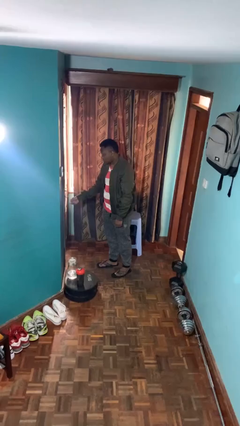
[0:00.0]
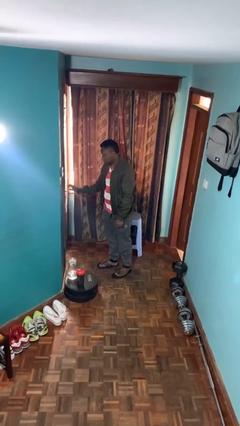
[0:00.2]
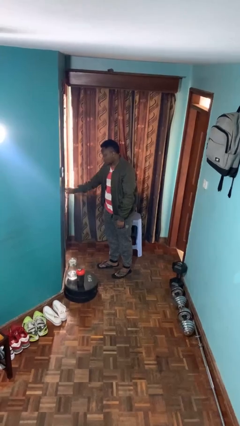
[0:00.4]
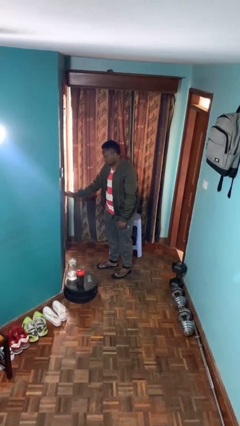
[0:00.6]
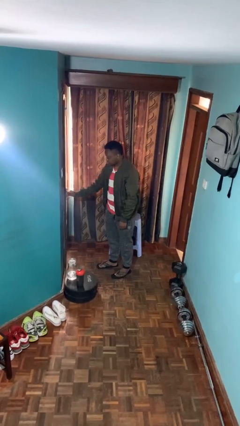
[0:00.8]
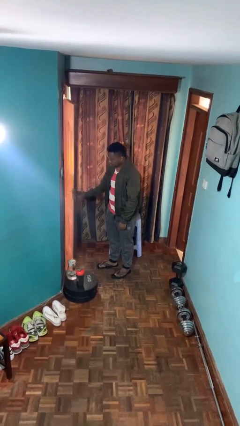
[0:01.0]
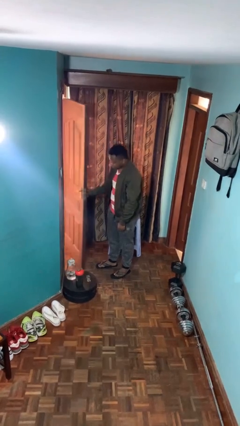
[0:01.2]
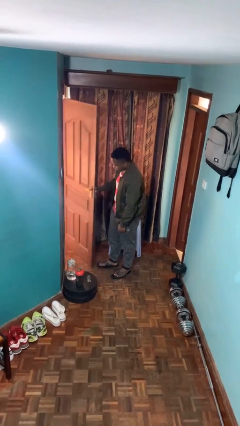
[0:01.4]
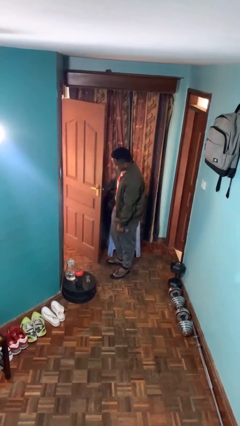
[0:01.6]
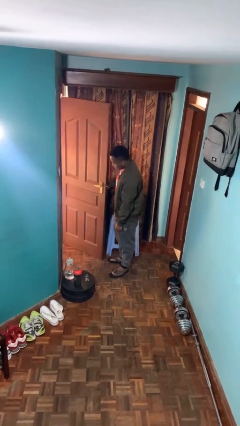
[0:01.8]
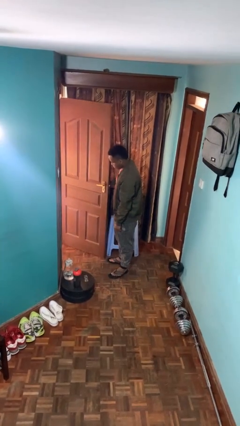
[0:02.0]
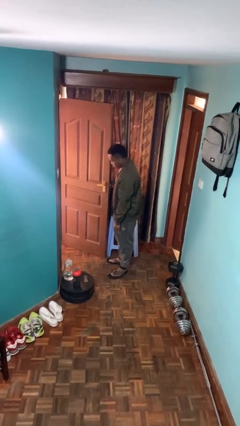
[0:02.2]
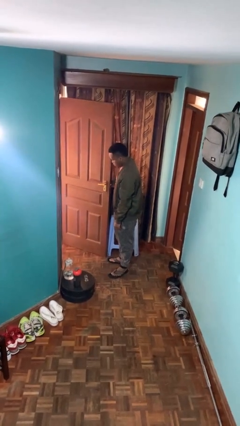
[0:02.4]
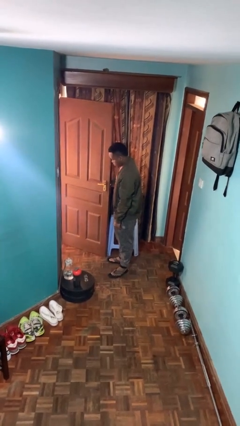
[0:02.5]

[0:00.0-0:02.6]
person opens facility door

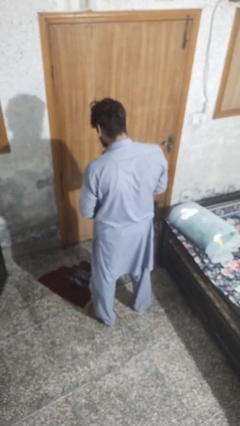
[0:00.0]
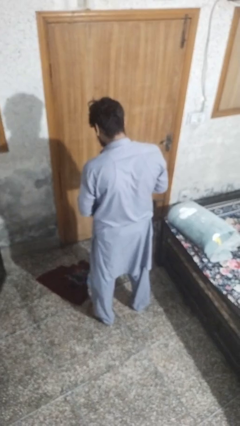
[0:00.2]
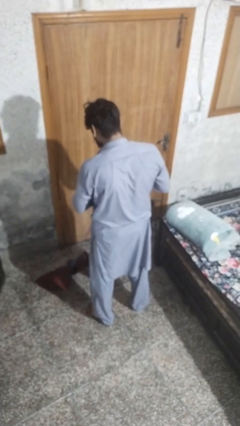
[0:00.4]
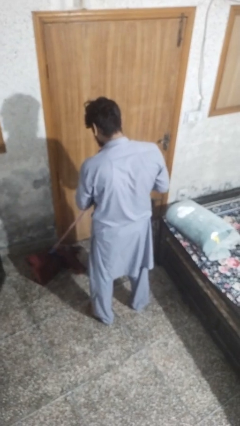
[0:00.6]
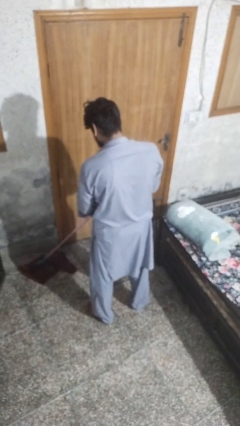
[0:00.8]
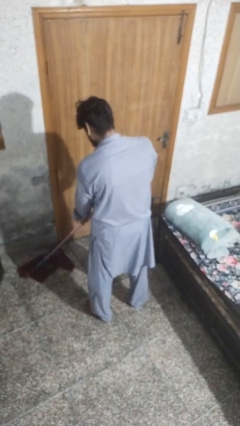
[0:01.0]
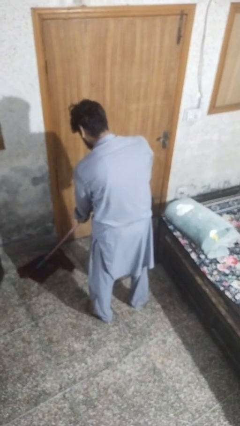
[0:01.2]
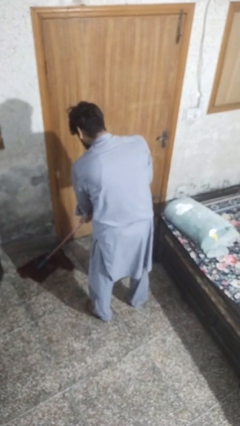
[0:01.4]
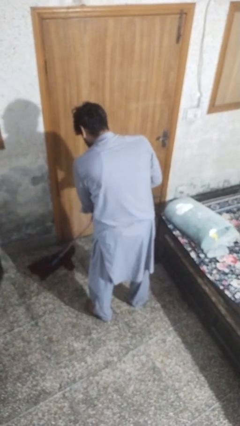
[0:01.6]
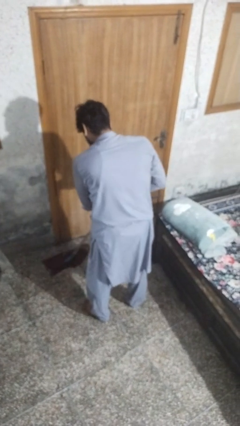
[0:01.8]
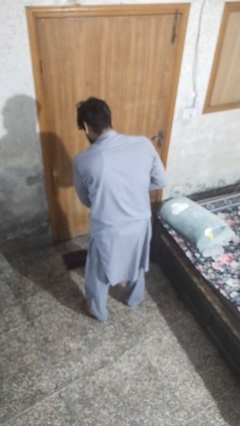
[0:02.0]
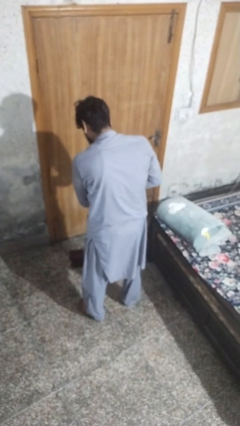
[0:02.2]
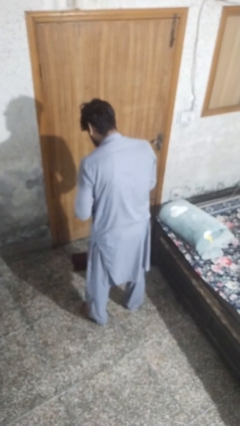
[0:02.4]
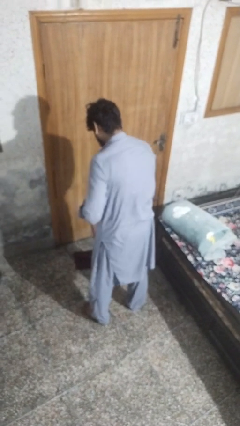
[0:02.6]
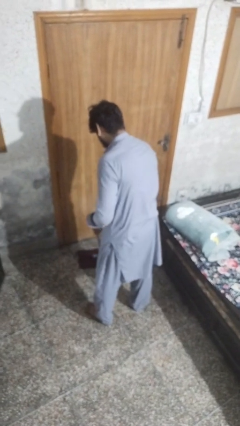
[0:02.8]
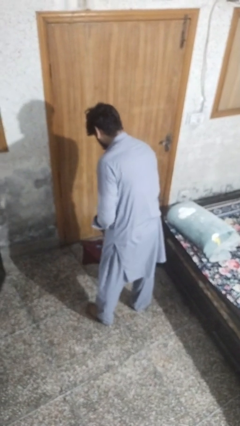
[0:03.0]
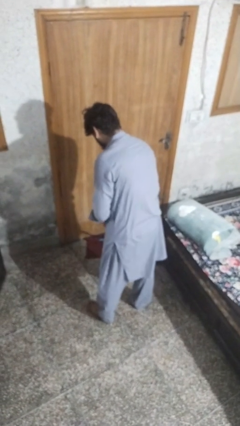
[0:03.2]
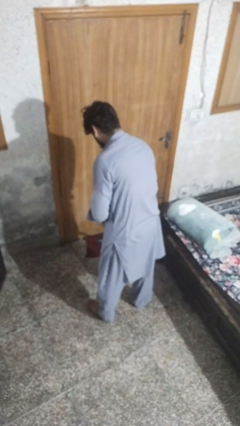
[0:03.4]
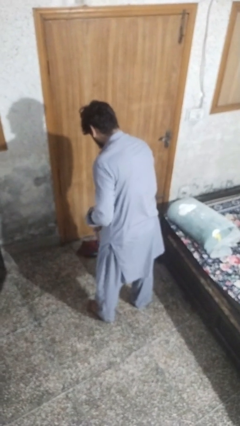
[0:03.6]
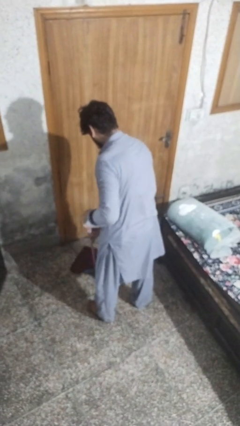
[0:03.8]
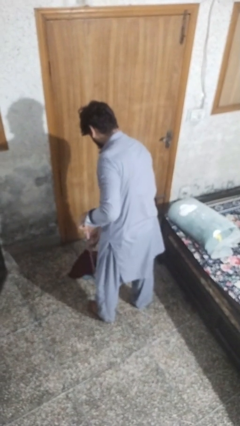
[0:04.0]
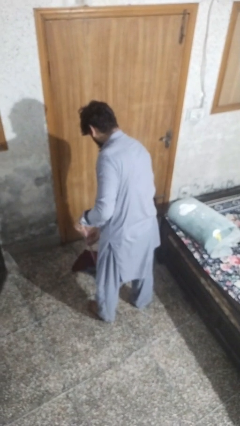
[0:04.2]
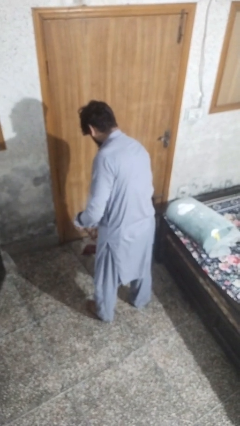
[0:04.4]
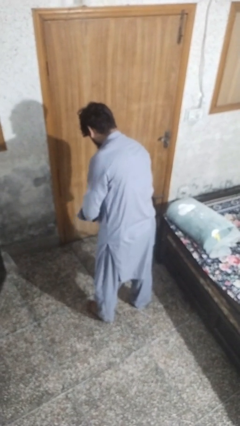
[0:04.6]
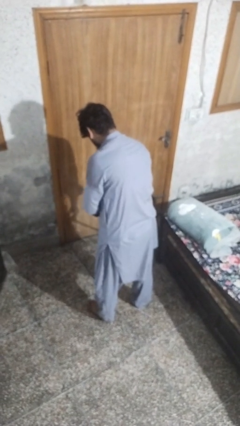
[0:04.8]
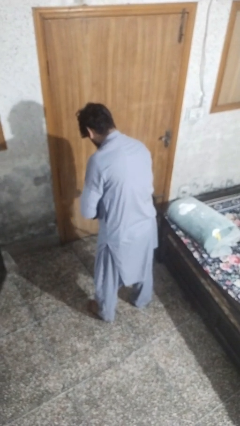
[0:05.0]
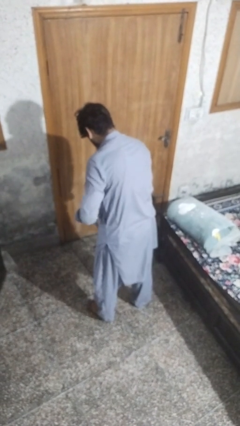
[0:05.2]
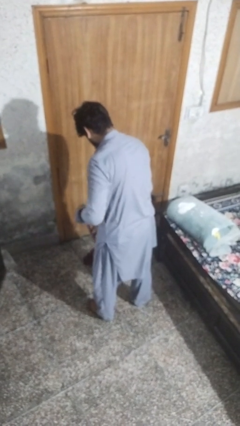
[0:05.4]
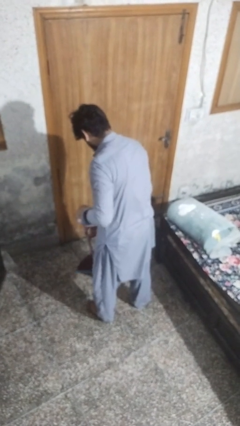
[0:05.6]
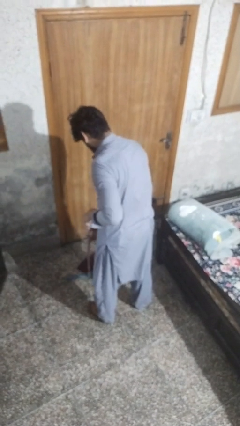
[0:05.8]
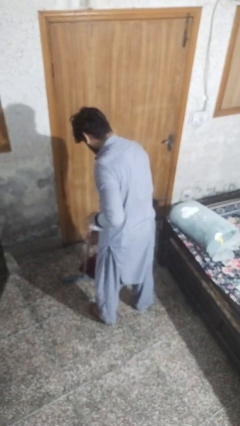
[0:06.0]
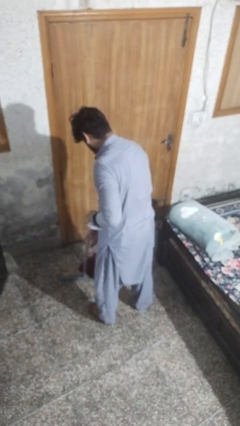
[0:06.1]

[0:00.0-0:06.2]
person mops

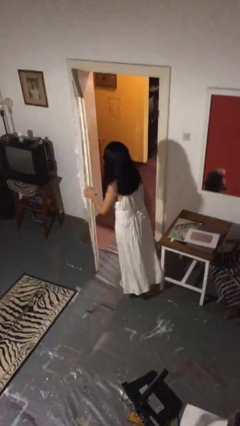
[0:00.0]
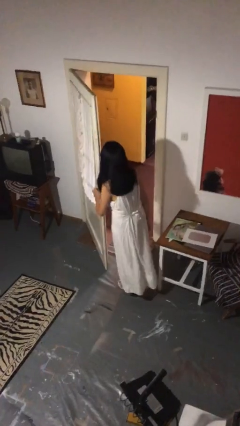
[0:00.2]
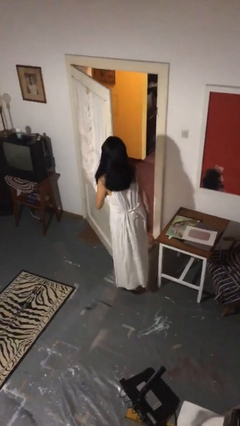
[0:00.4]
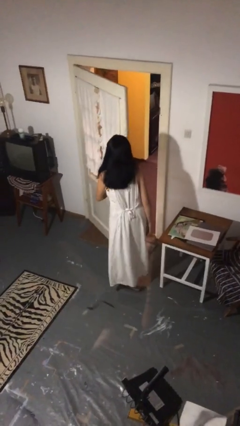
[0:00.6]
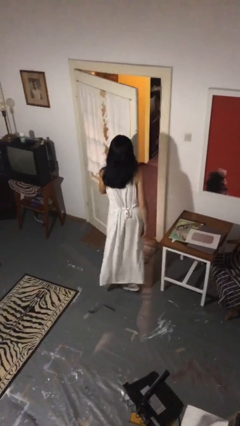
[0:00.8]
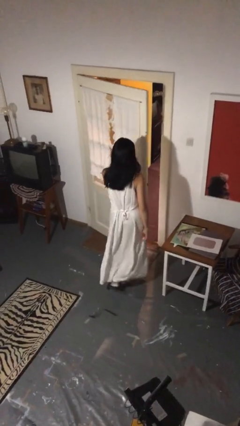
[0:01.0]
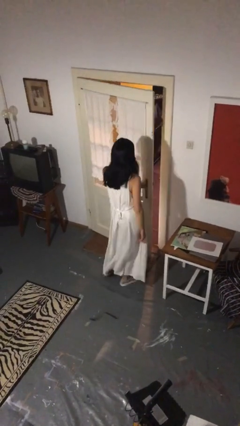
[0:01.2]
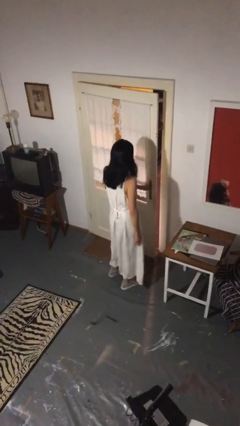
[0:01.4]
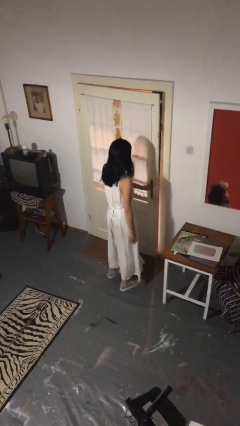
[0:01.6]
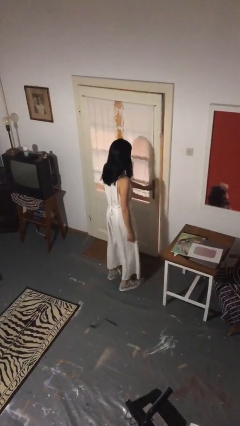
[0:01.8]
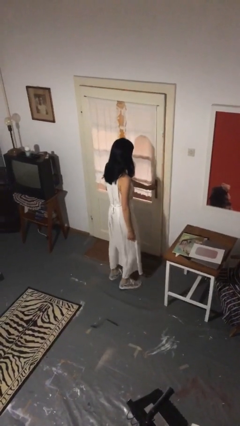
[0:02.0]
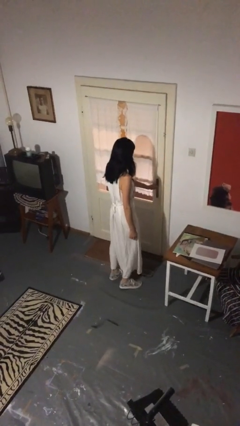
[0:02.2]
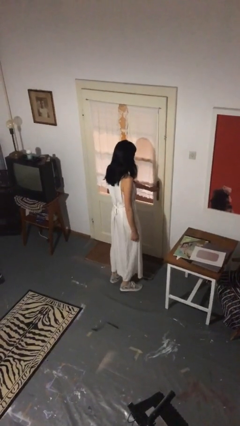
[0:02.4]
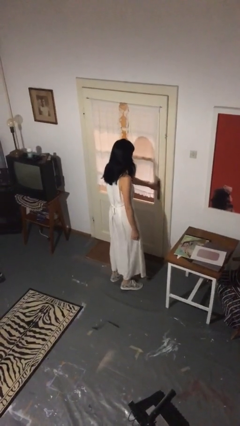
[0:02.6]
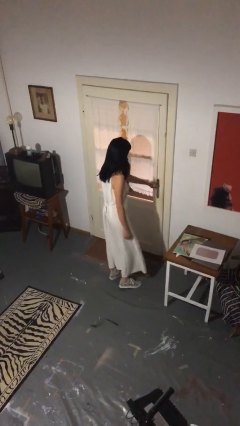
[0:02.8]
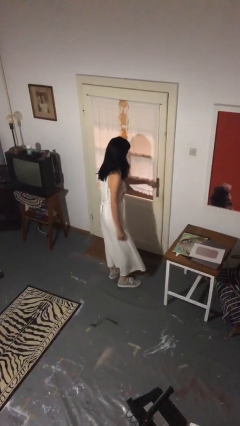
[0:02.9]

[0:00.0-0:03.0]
person closes facility door

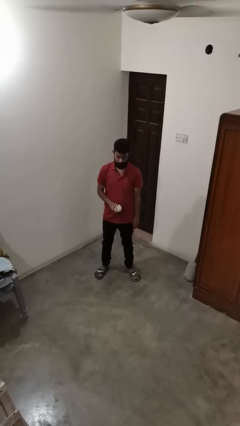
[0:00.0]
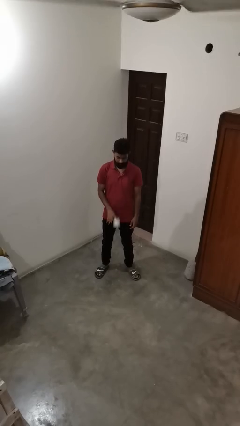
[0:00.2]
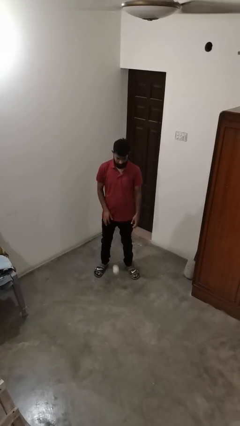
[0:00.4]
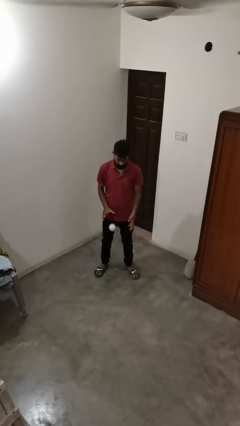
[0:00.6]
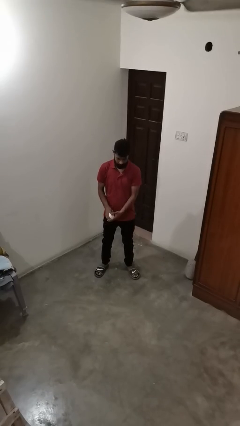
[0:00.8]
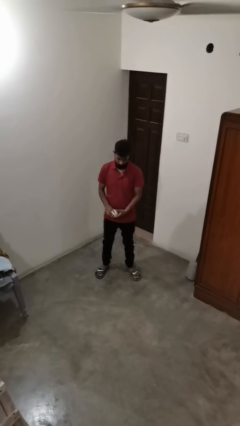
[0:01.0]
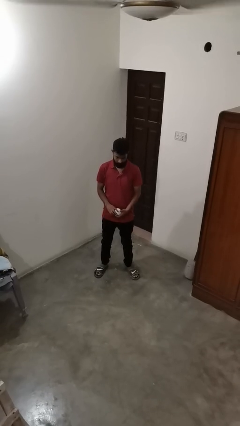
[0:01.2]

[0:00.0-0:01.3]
person bounces ball on floor

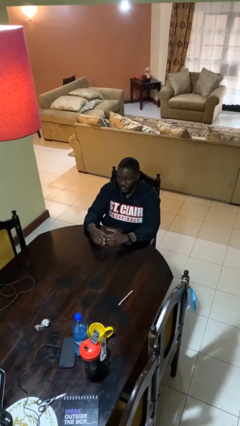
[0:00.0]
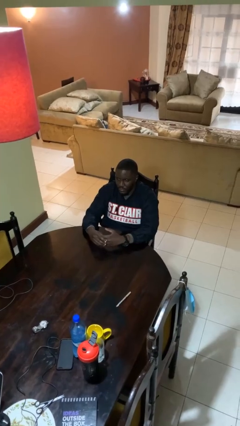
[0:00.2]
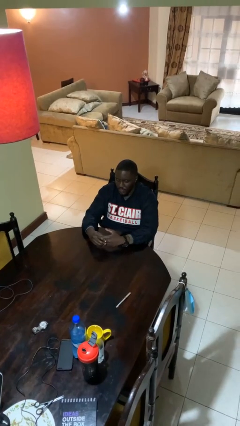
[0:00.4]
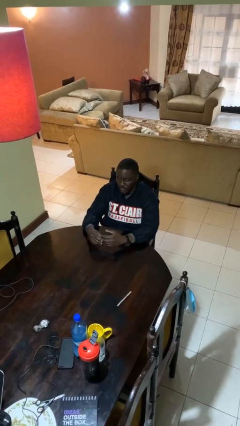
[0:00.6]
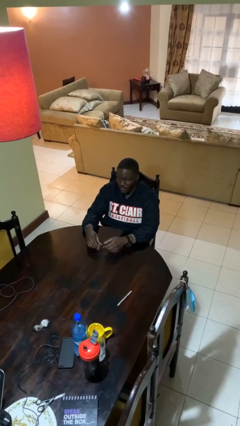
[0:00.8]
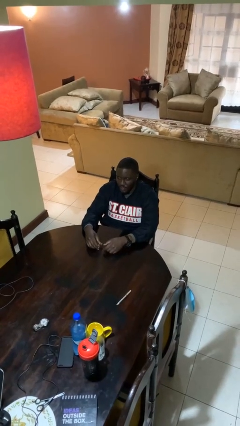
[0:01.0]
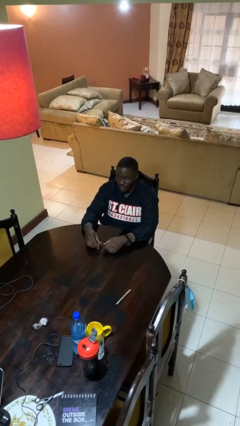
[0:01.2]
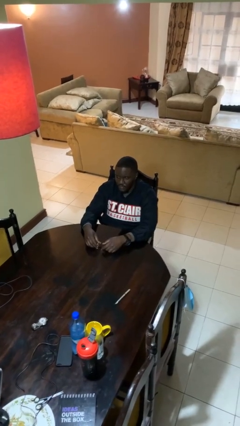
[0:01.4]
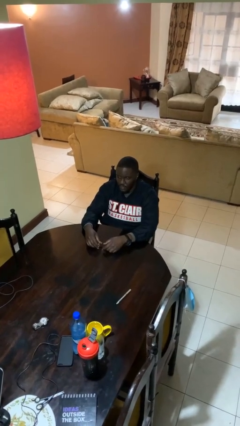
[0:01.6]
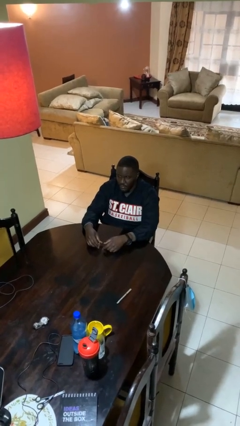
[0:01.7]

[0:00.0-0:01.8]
person takes off ring

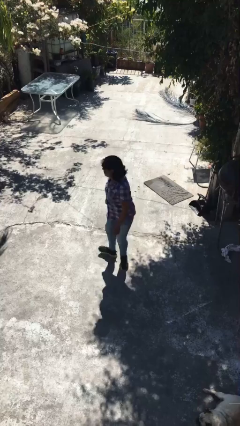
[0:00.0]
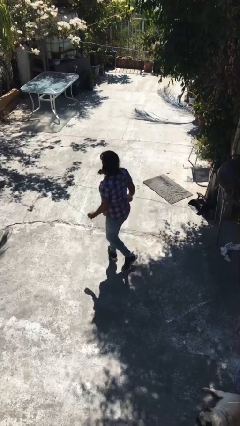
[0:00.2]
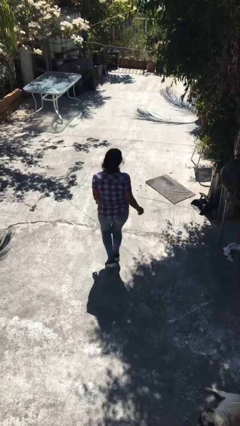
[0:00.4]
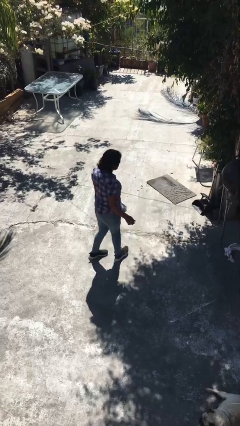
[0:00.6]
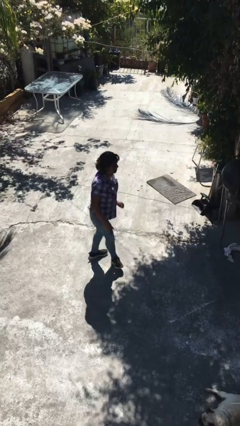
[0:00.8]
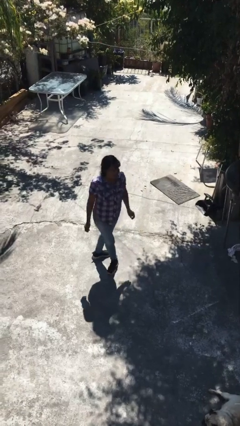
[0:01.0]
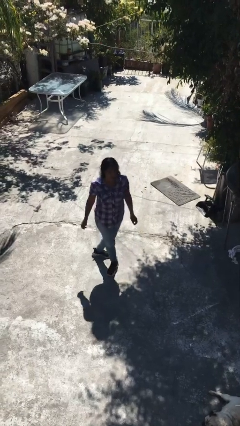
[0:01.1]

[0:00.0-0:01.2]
person twirls

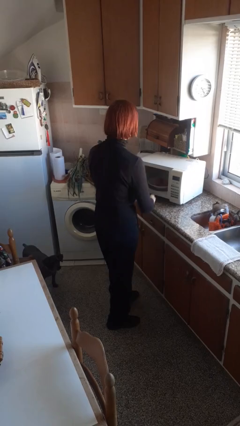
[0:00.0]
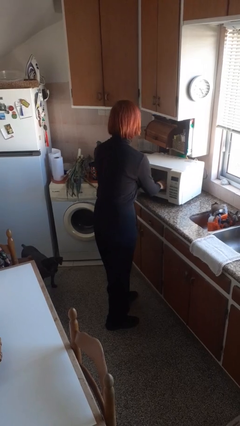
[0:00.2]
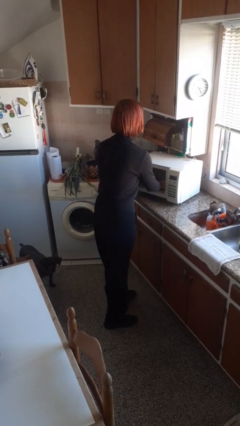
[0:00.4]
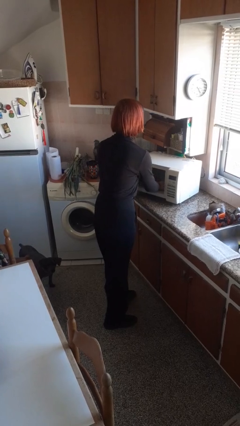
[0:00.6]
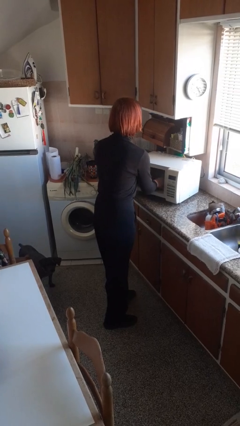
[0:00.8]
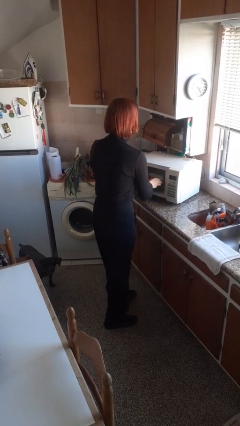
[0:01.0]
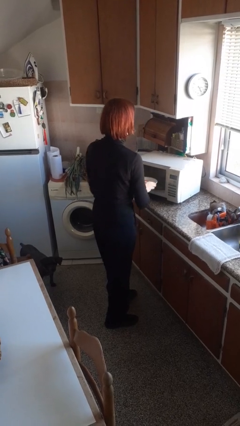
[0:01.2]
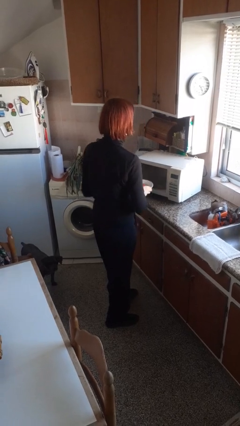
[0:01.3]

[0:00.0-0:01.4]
person takes object from microwave
